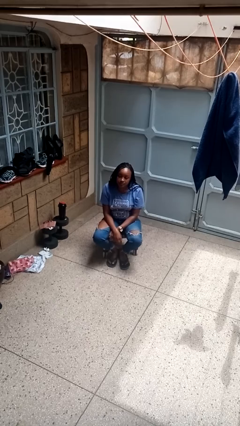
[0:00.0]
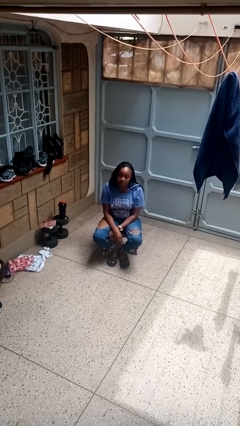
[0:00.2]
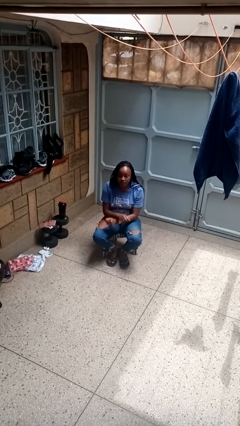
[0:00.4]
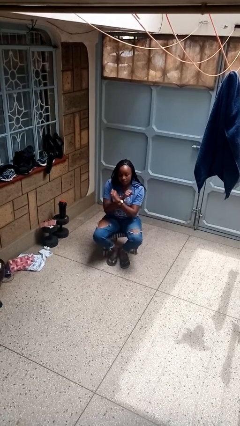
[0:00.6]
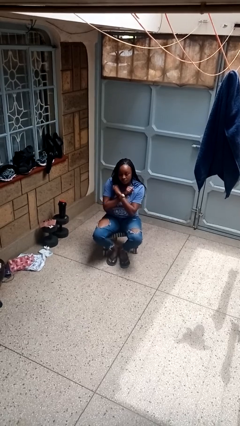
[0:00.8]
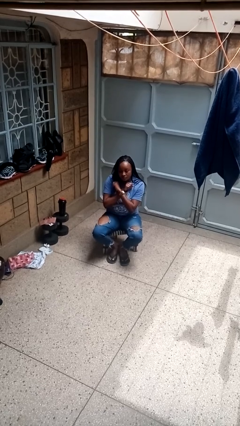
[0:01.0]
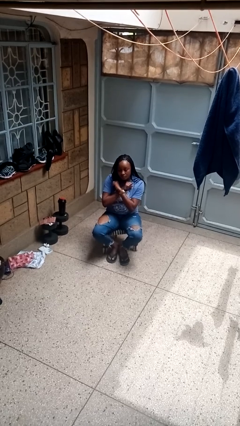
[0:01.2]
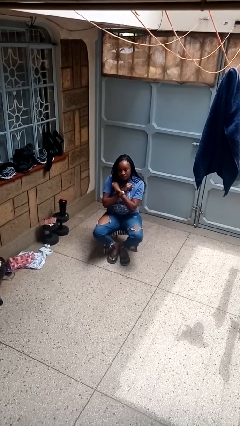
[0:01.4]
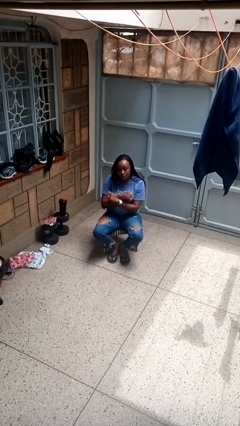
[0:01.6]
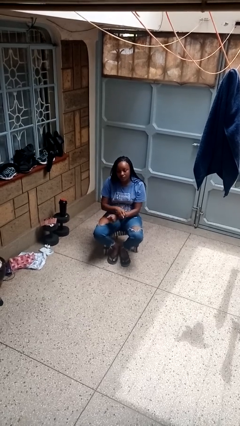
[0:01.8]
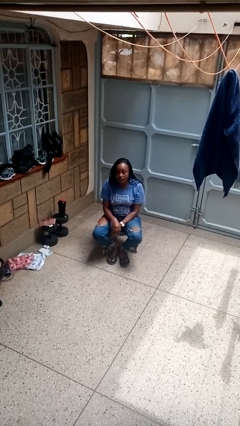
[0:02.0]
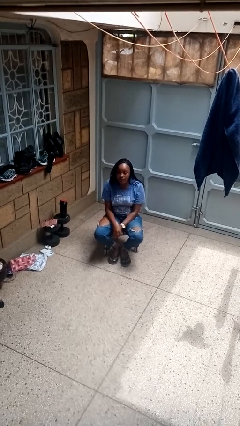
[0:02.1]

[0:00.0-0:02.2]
person gestures arms x

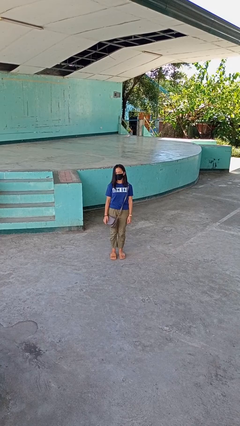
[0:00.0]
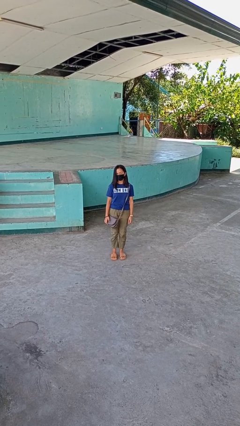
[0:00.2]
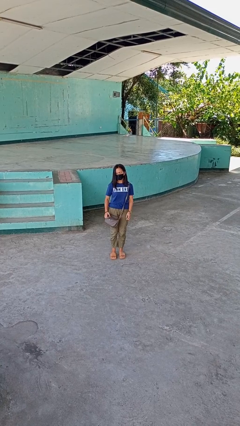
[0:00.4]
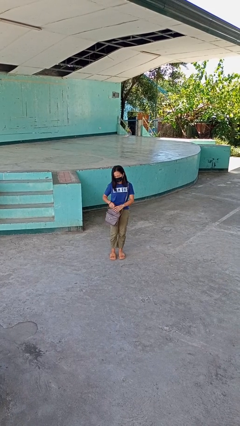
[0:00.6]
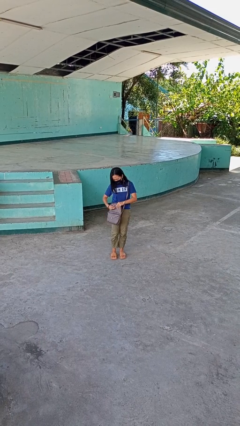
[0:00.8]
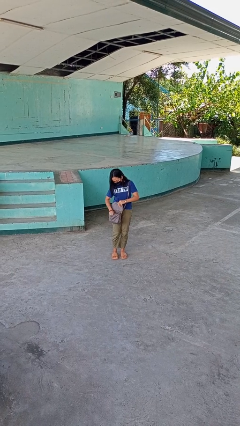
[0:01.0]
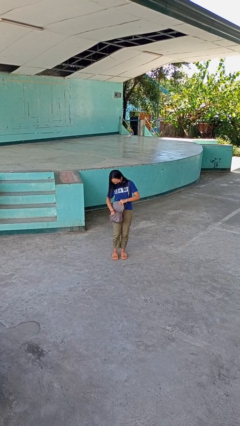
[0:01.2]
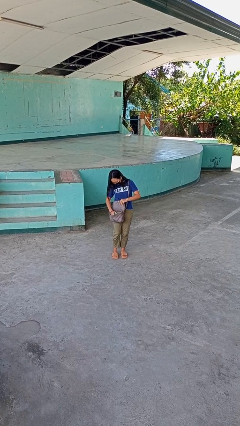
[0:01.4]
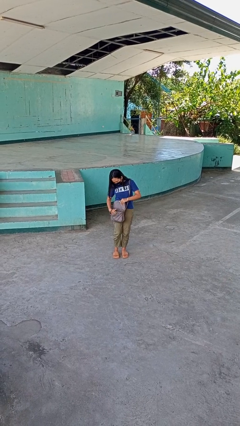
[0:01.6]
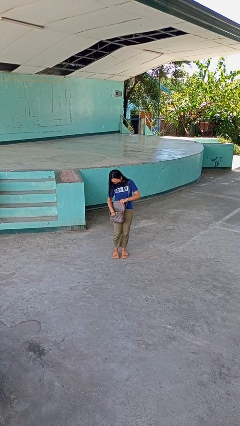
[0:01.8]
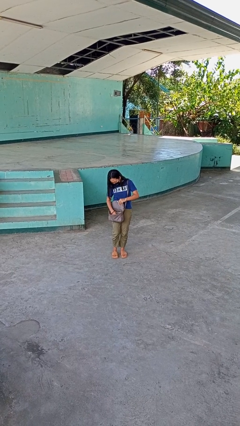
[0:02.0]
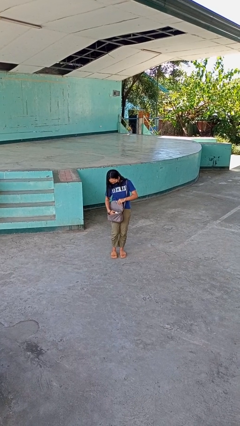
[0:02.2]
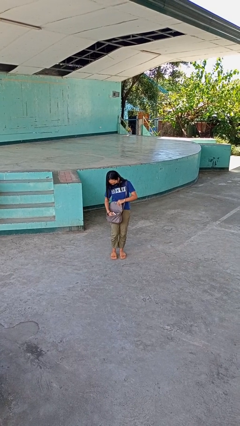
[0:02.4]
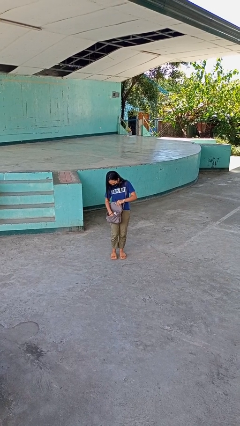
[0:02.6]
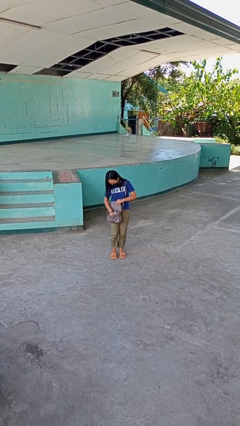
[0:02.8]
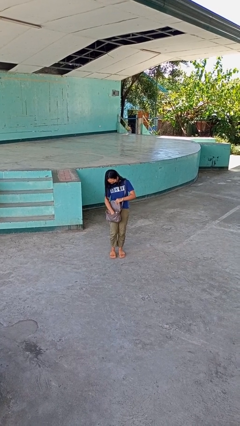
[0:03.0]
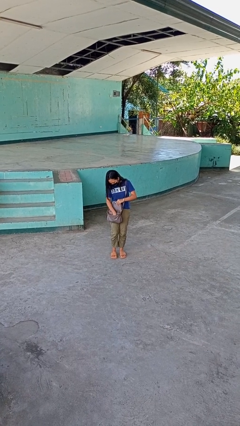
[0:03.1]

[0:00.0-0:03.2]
person searches in purse

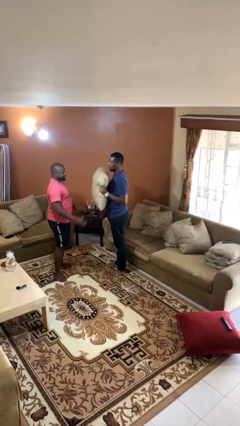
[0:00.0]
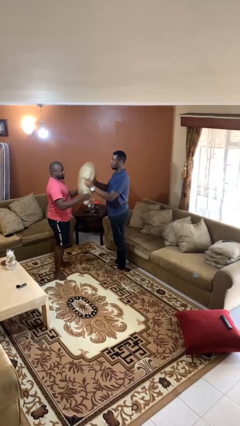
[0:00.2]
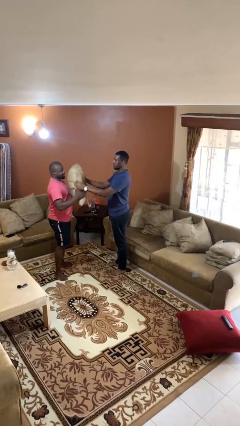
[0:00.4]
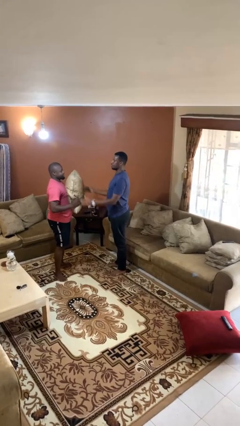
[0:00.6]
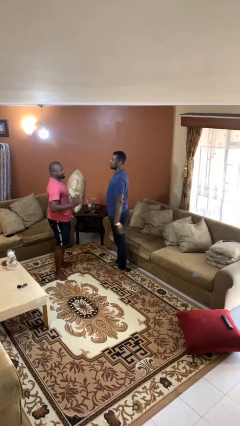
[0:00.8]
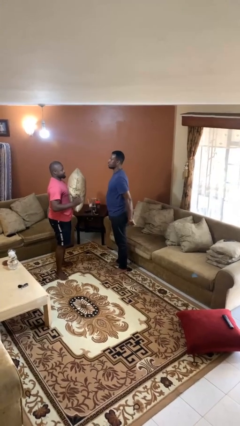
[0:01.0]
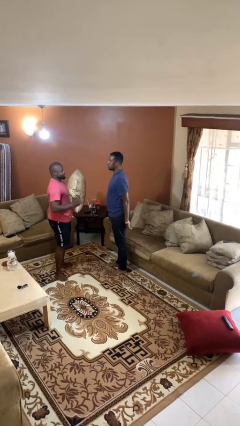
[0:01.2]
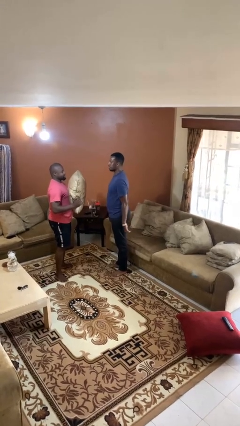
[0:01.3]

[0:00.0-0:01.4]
person transfers object to person

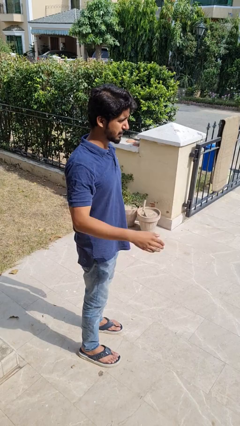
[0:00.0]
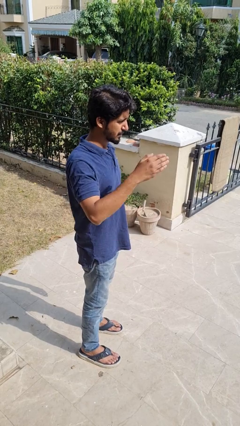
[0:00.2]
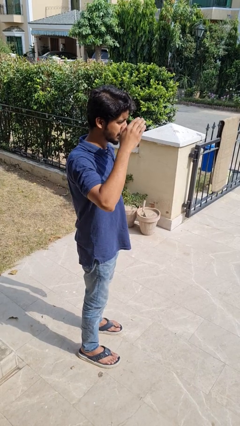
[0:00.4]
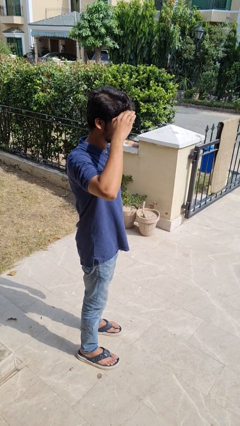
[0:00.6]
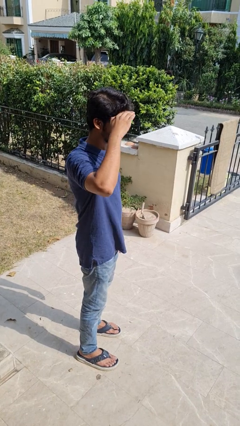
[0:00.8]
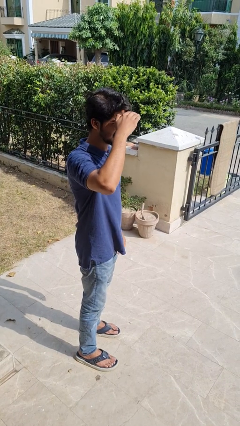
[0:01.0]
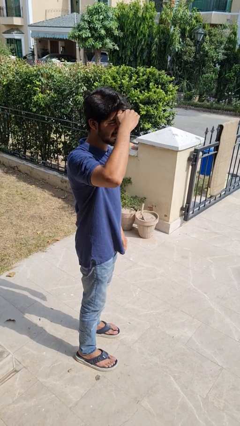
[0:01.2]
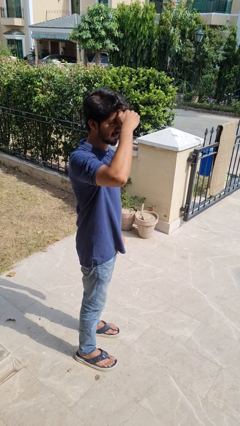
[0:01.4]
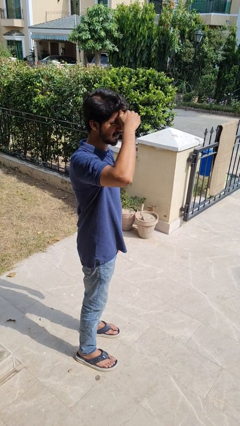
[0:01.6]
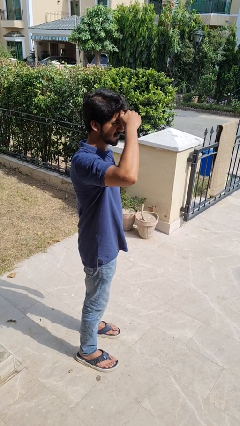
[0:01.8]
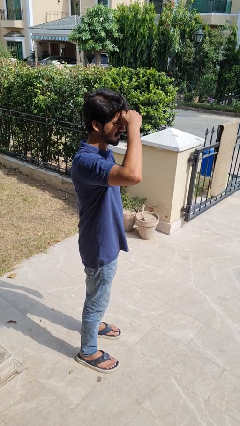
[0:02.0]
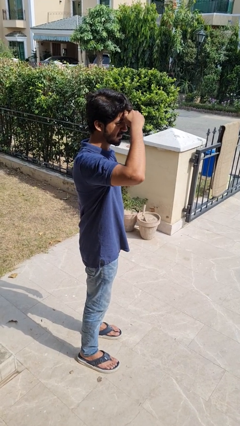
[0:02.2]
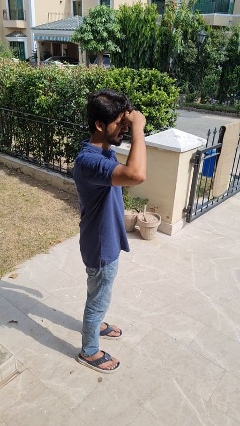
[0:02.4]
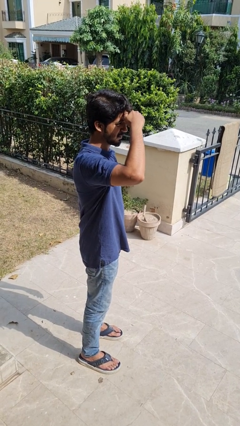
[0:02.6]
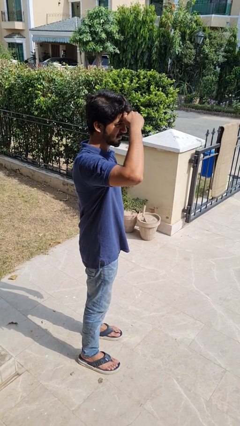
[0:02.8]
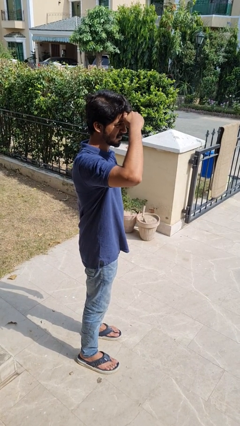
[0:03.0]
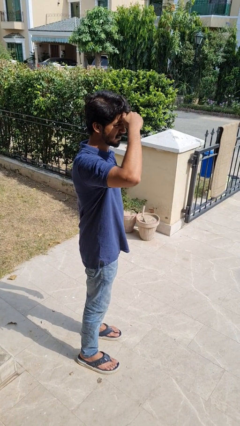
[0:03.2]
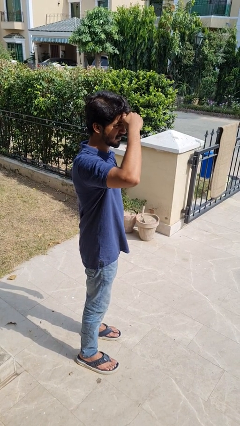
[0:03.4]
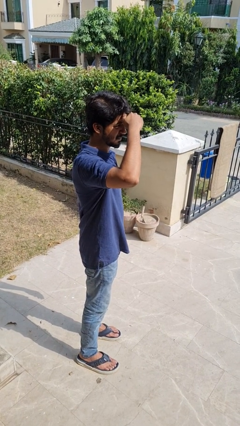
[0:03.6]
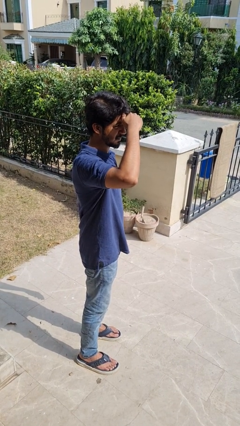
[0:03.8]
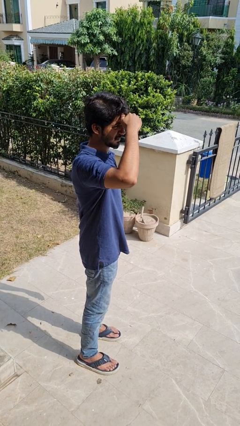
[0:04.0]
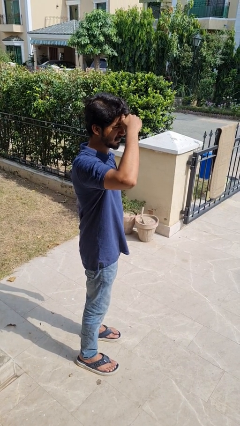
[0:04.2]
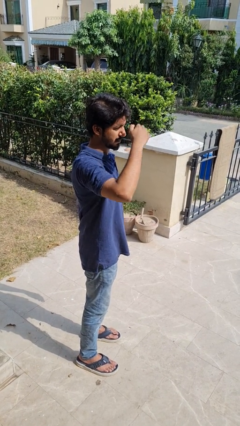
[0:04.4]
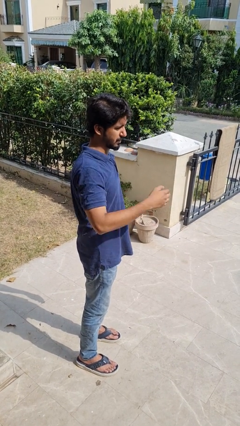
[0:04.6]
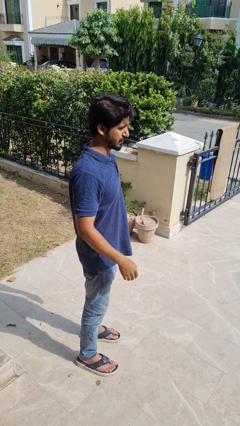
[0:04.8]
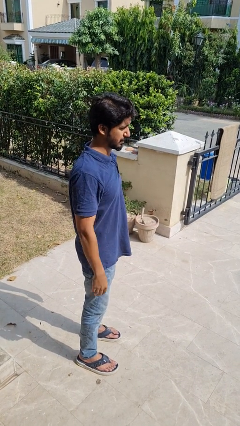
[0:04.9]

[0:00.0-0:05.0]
person shades eyes

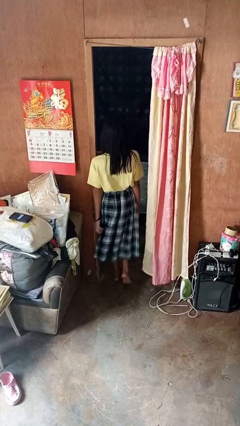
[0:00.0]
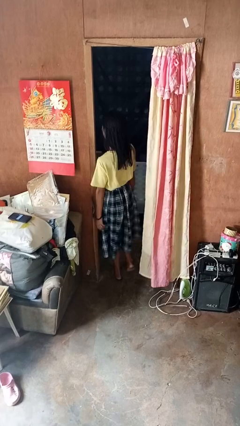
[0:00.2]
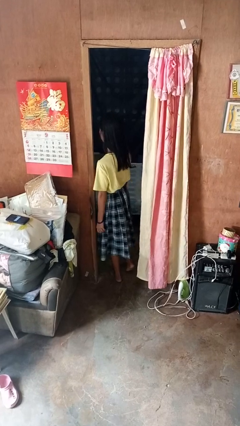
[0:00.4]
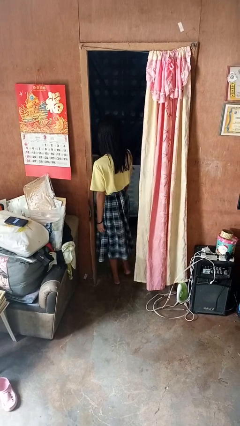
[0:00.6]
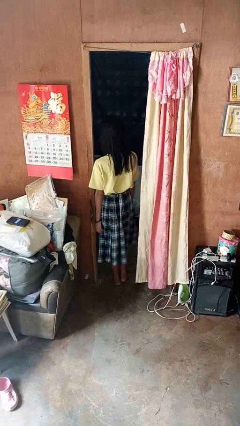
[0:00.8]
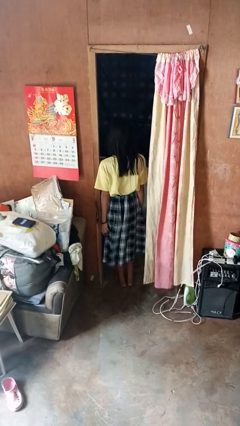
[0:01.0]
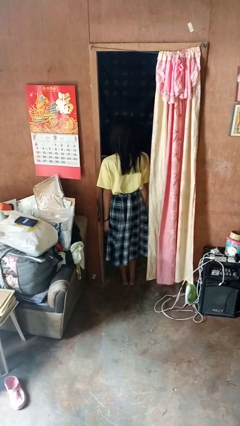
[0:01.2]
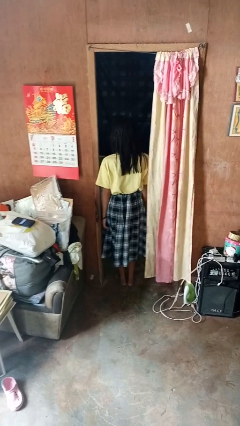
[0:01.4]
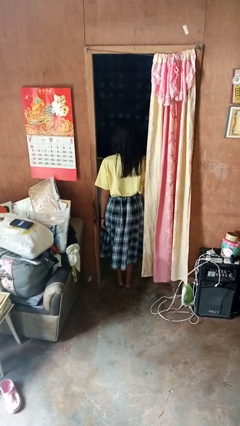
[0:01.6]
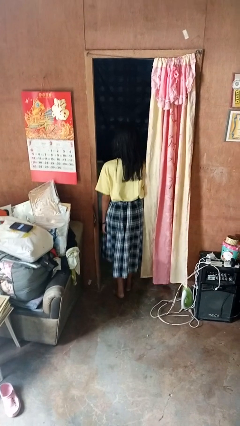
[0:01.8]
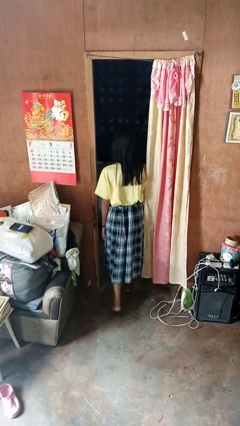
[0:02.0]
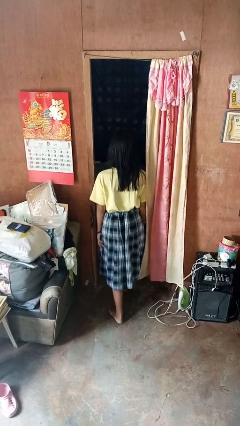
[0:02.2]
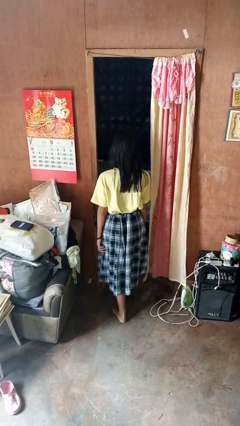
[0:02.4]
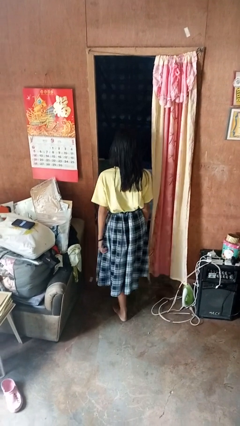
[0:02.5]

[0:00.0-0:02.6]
person bumps into wall

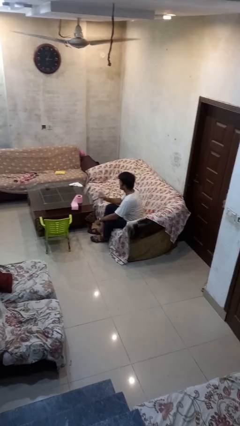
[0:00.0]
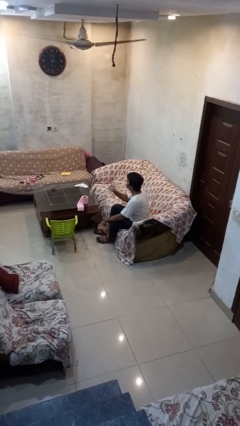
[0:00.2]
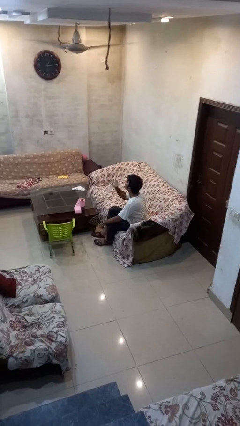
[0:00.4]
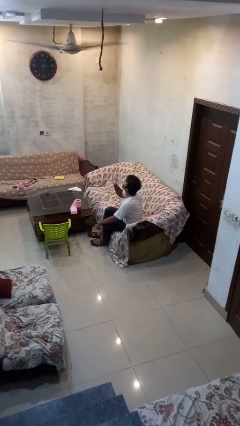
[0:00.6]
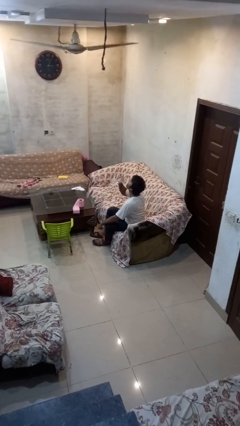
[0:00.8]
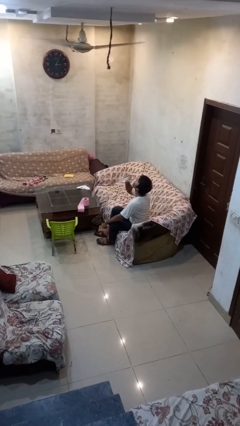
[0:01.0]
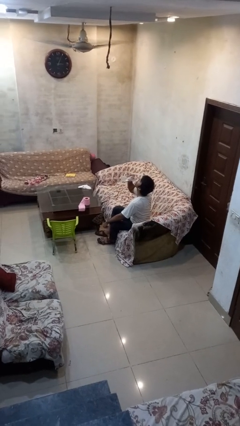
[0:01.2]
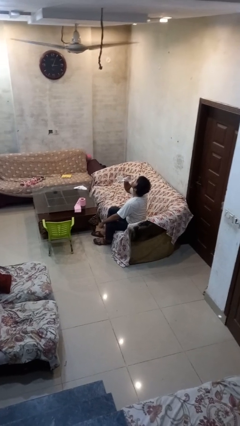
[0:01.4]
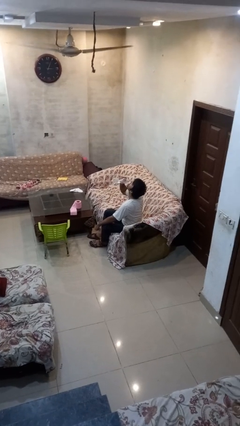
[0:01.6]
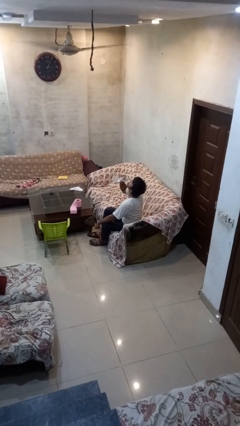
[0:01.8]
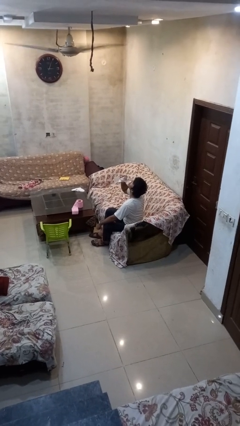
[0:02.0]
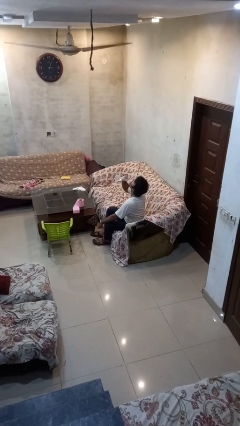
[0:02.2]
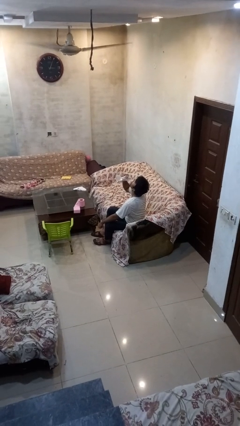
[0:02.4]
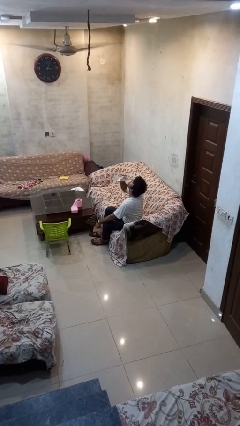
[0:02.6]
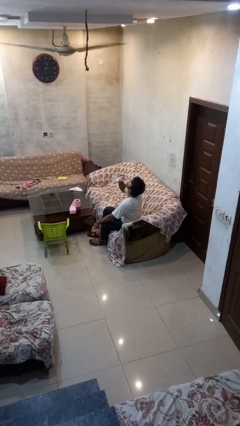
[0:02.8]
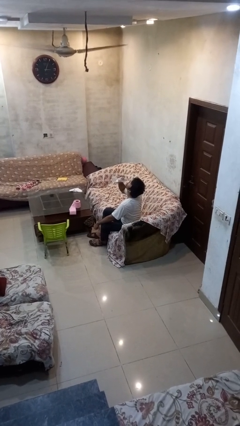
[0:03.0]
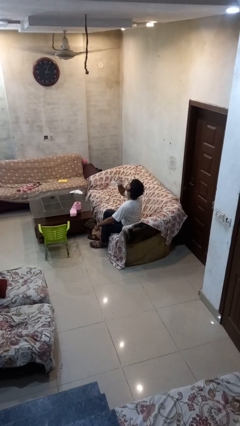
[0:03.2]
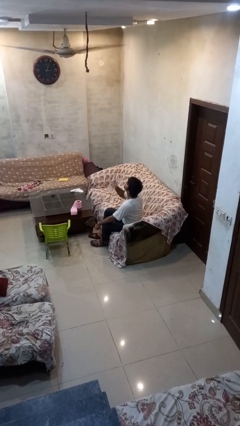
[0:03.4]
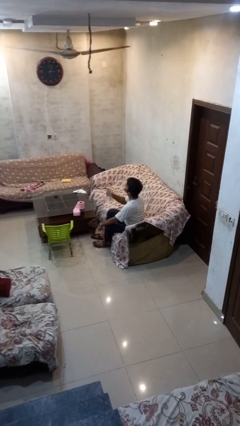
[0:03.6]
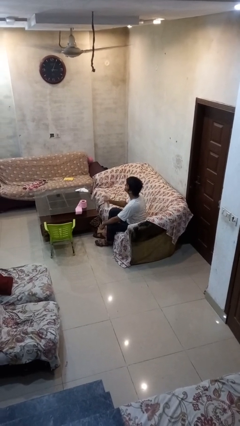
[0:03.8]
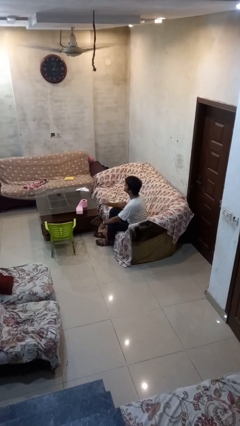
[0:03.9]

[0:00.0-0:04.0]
person drinks from bottle
